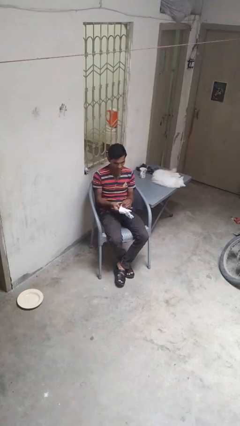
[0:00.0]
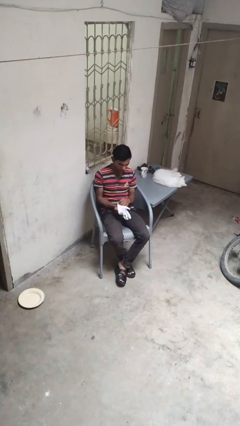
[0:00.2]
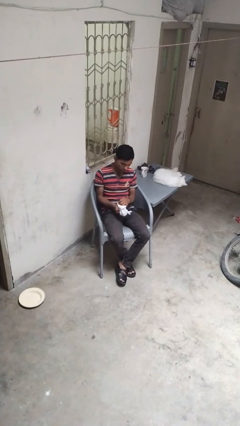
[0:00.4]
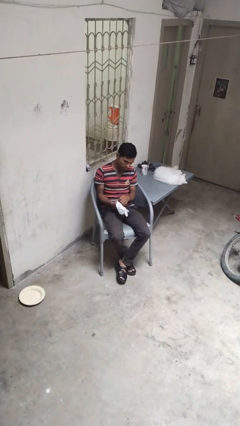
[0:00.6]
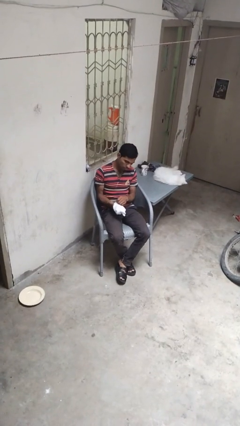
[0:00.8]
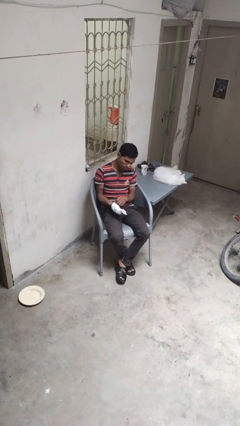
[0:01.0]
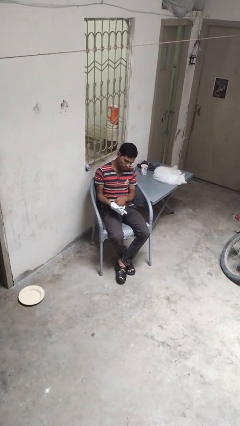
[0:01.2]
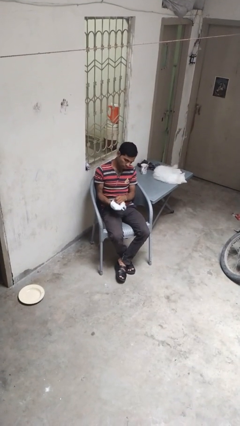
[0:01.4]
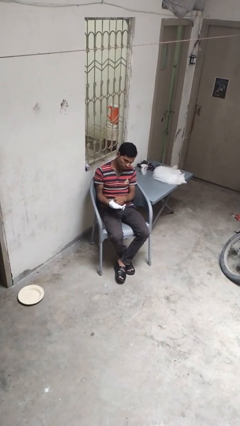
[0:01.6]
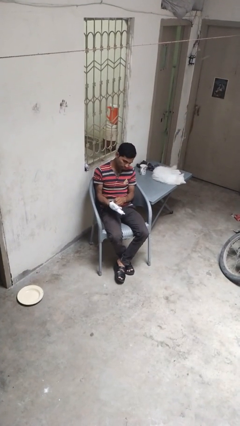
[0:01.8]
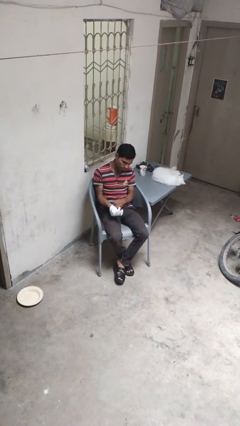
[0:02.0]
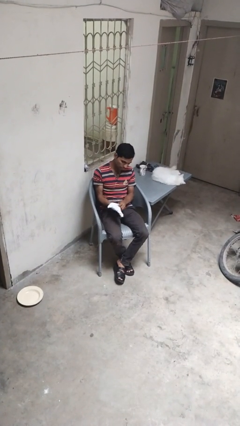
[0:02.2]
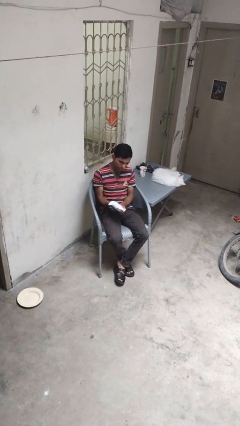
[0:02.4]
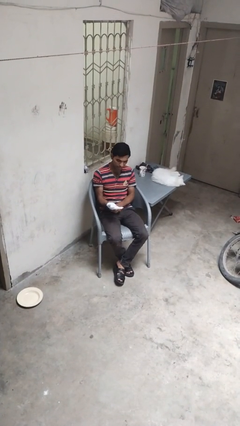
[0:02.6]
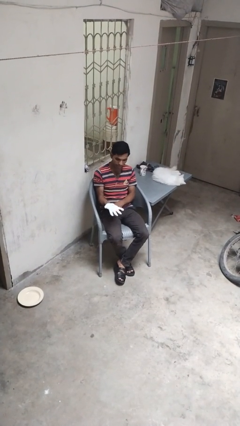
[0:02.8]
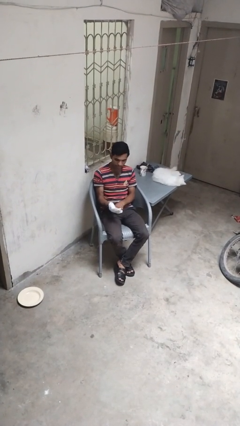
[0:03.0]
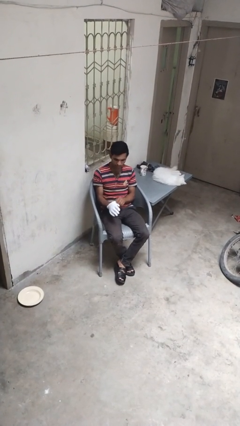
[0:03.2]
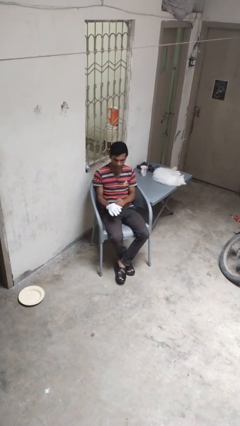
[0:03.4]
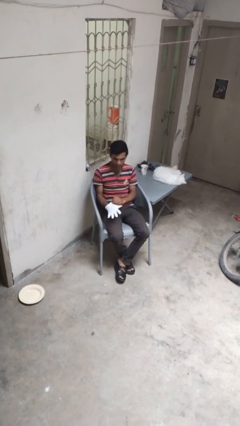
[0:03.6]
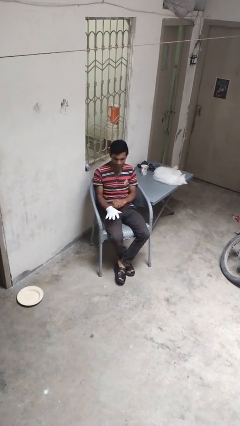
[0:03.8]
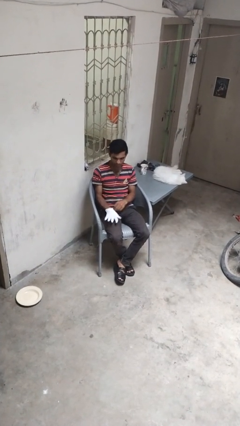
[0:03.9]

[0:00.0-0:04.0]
person puts on gloves

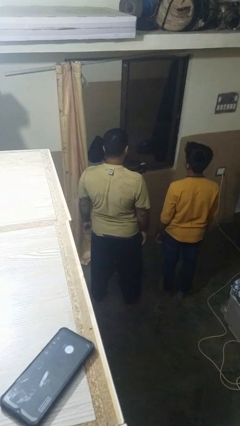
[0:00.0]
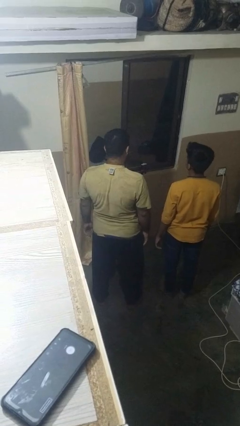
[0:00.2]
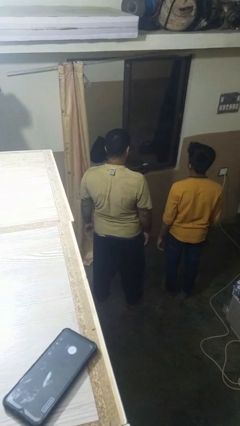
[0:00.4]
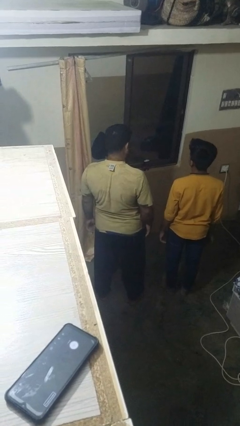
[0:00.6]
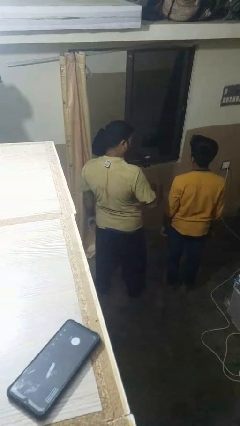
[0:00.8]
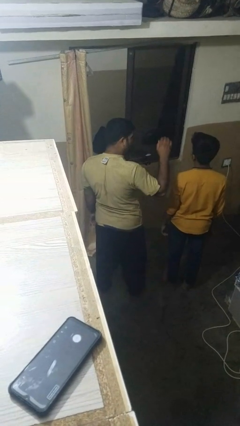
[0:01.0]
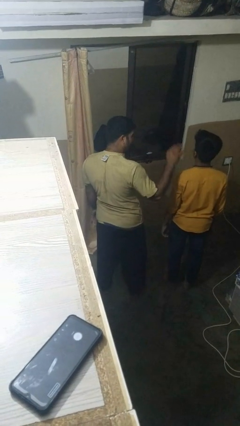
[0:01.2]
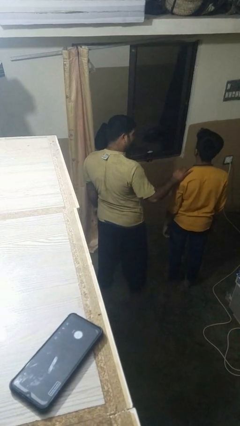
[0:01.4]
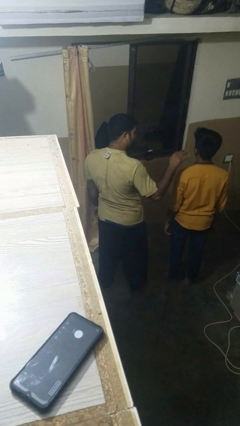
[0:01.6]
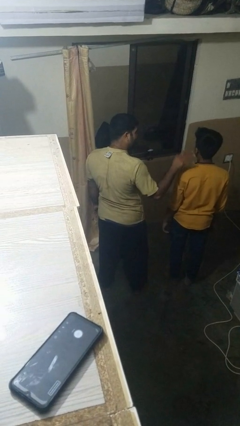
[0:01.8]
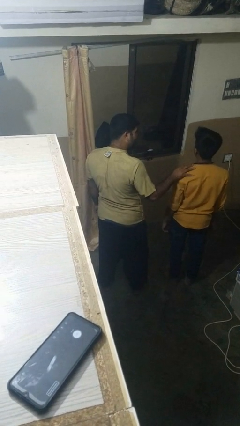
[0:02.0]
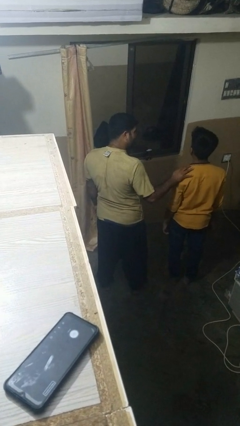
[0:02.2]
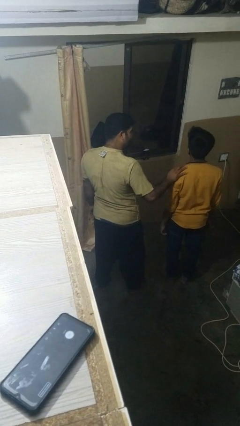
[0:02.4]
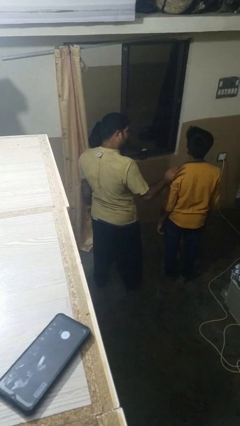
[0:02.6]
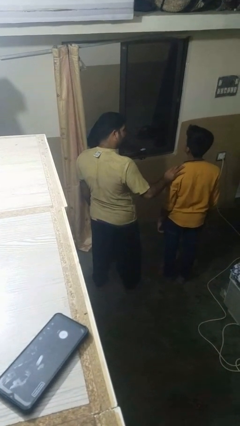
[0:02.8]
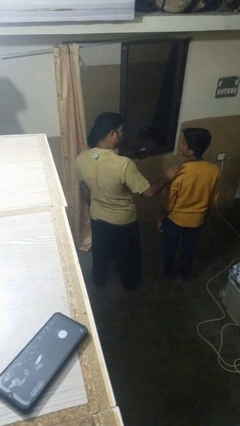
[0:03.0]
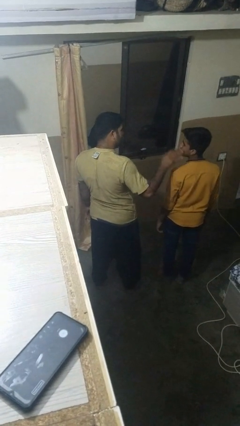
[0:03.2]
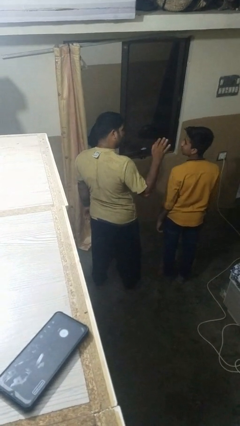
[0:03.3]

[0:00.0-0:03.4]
person pounds shoulders of person

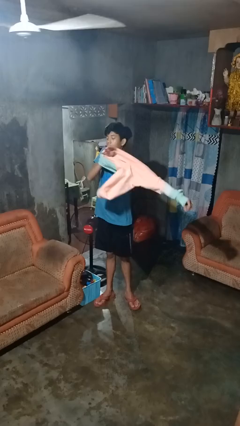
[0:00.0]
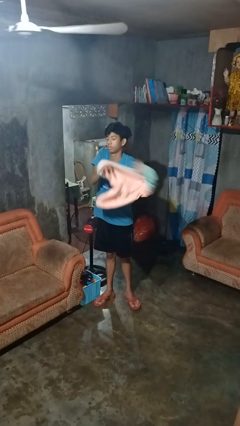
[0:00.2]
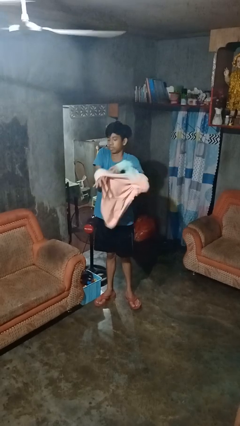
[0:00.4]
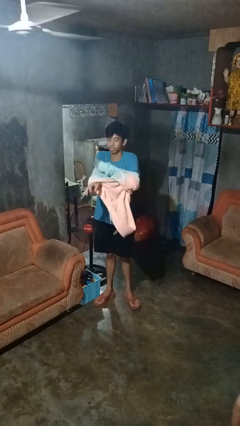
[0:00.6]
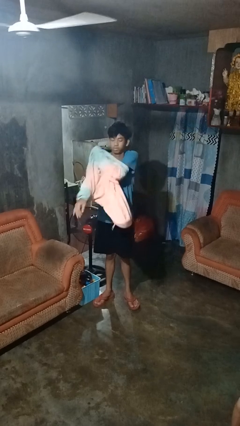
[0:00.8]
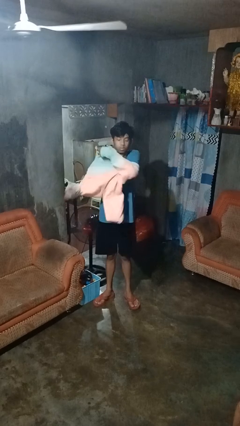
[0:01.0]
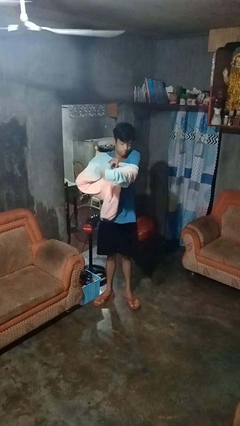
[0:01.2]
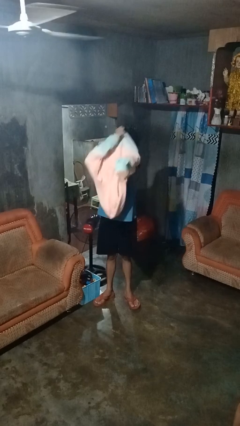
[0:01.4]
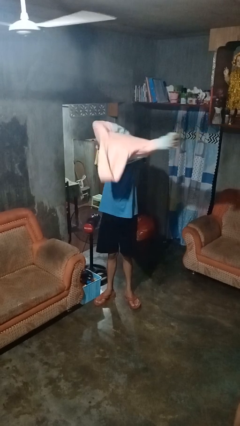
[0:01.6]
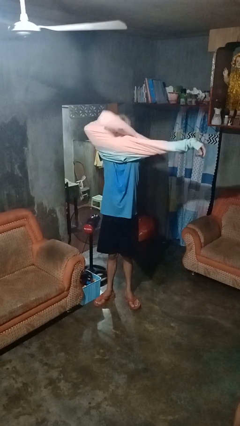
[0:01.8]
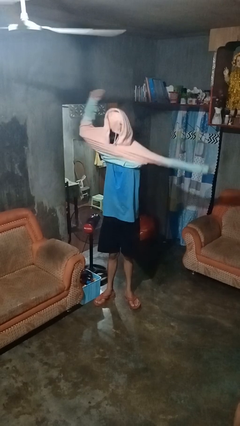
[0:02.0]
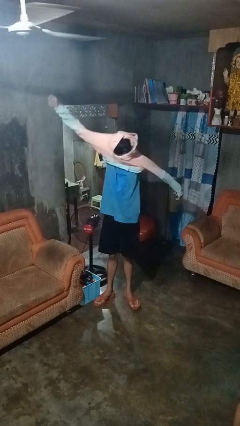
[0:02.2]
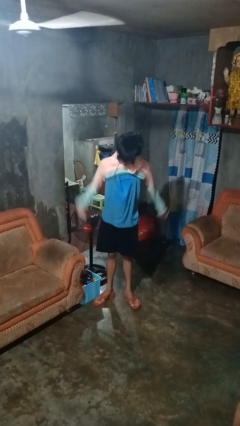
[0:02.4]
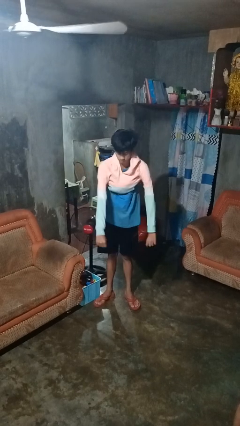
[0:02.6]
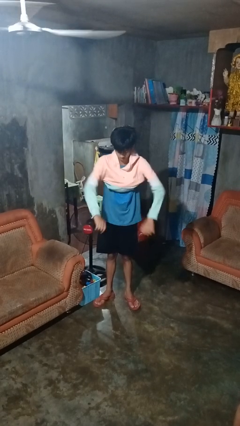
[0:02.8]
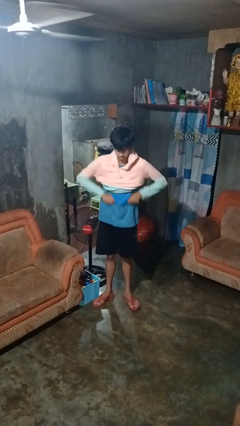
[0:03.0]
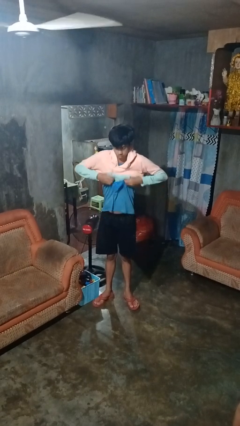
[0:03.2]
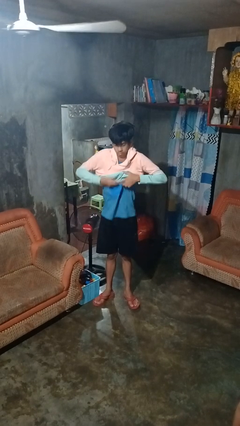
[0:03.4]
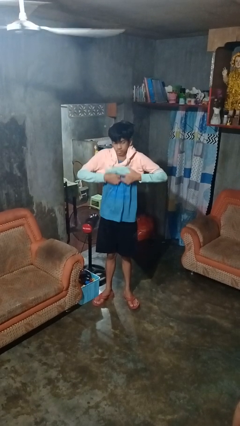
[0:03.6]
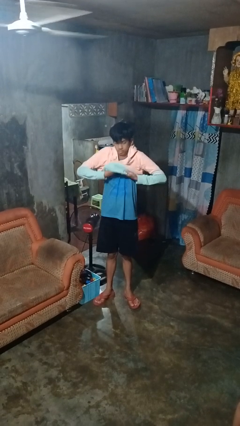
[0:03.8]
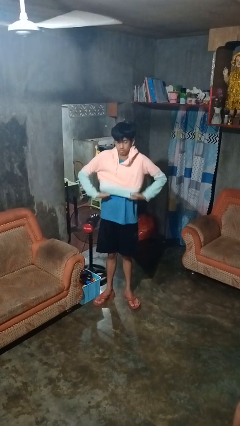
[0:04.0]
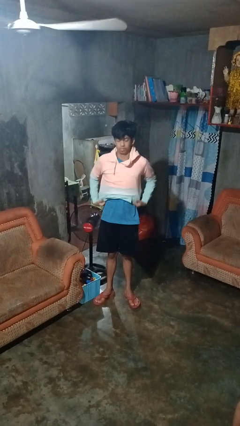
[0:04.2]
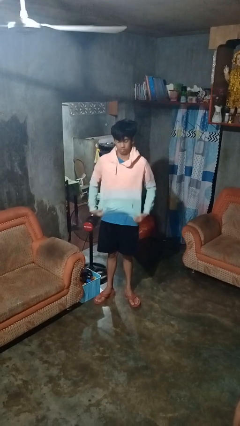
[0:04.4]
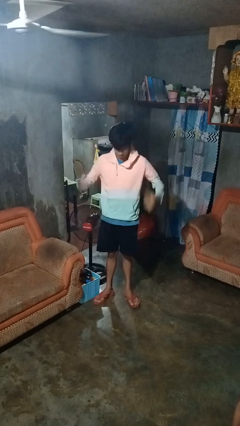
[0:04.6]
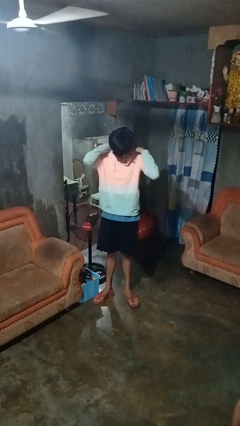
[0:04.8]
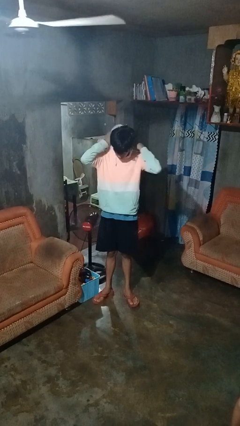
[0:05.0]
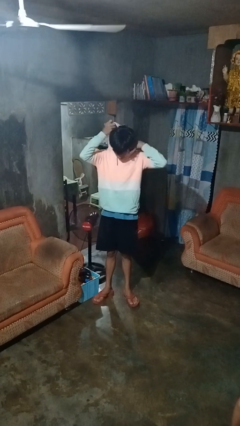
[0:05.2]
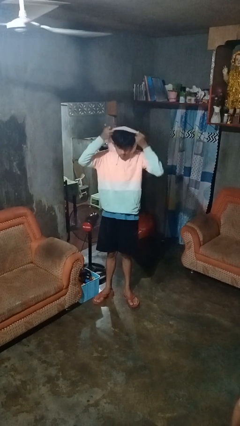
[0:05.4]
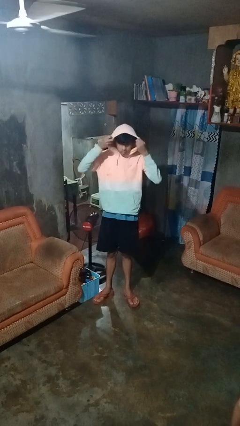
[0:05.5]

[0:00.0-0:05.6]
person puts on hoodie

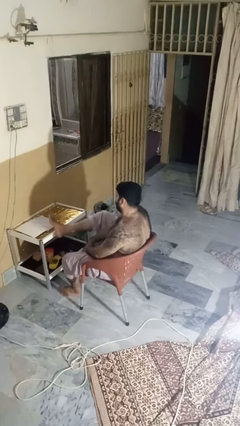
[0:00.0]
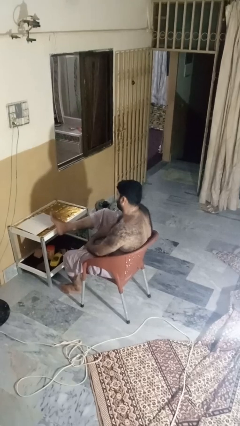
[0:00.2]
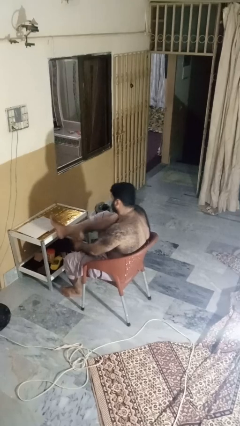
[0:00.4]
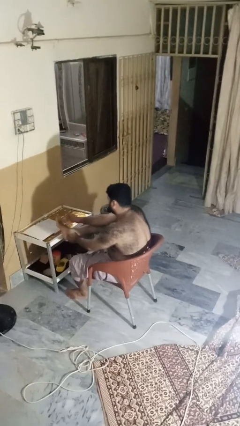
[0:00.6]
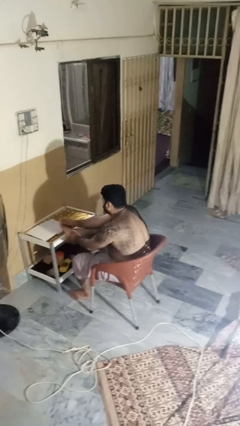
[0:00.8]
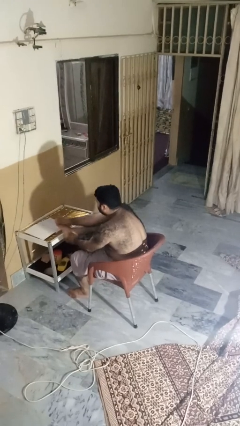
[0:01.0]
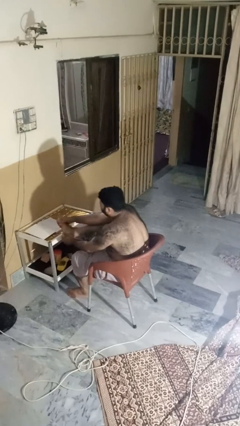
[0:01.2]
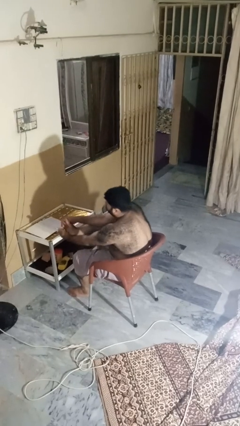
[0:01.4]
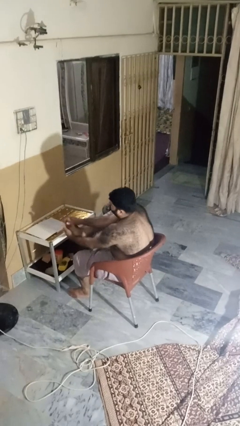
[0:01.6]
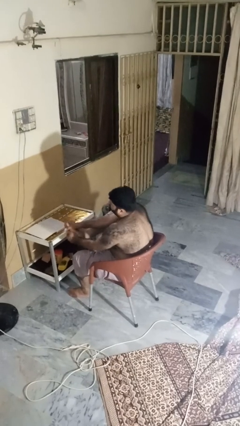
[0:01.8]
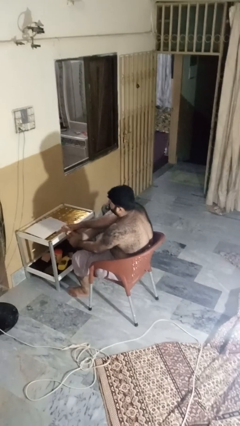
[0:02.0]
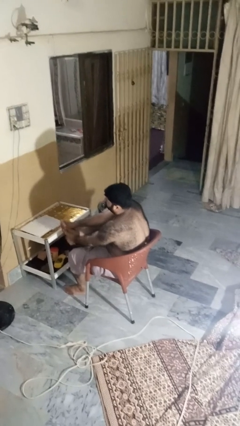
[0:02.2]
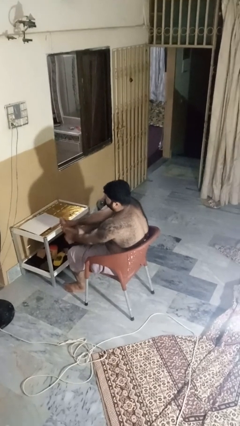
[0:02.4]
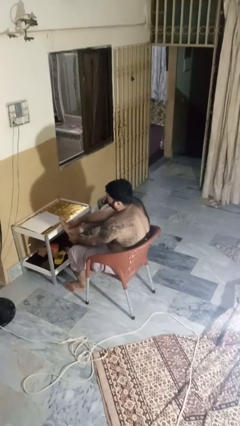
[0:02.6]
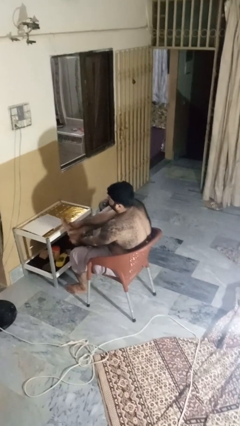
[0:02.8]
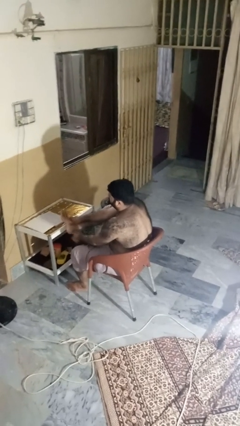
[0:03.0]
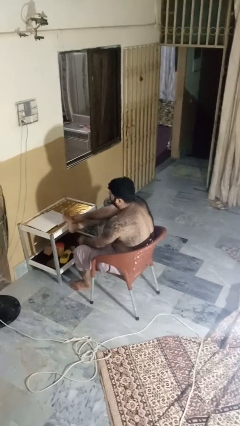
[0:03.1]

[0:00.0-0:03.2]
person stubs toe

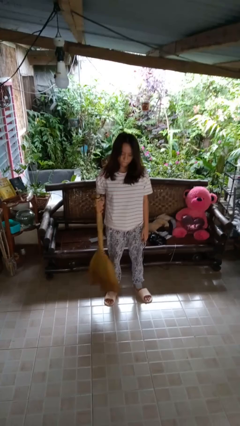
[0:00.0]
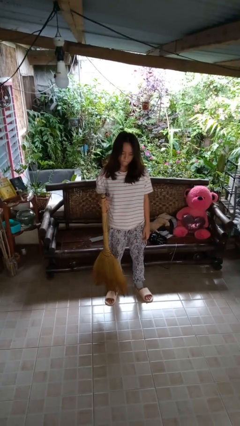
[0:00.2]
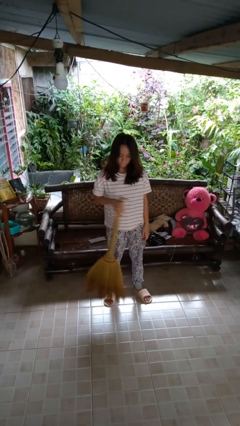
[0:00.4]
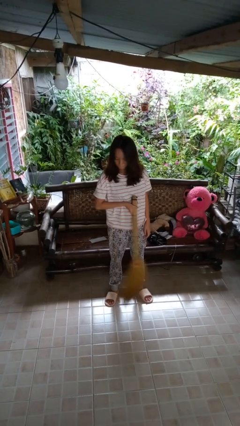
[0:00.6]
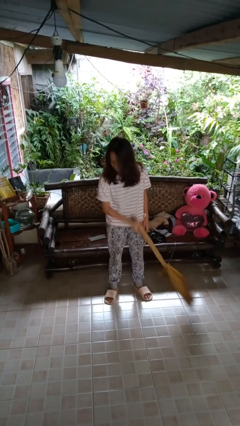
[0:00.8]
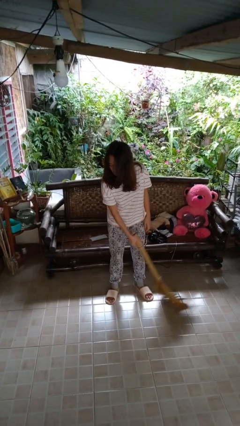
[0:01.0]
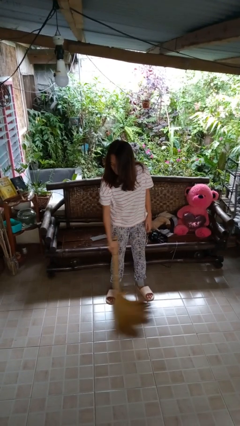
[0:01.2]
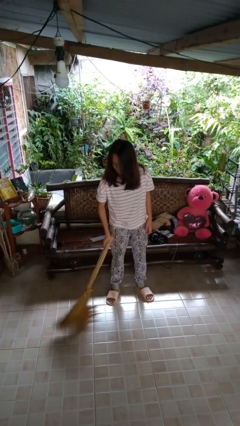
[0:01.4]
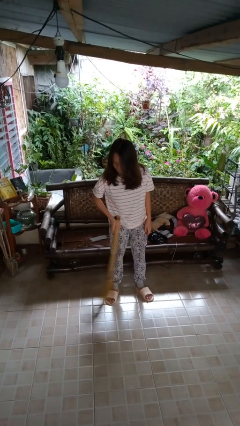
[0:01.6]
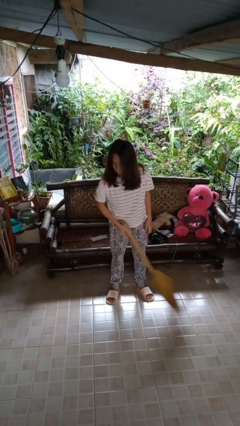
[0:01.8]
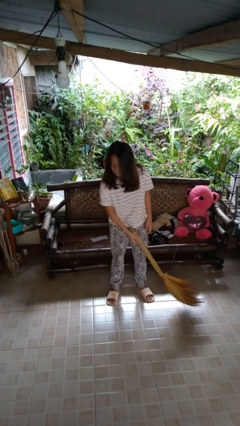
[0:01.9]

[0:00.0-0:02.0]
person sweeps floor
